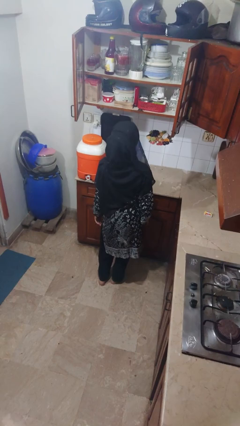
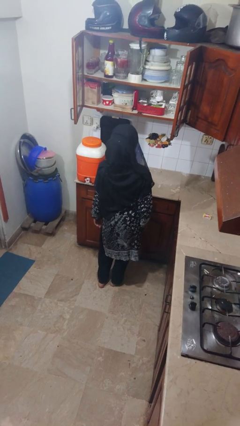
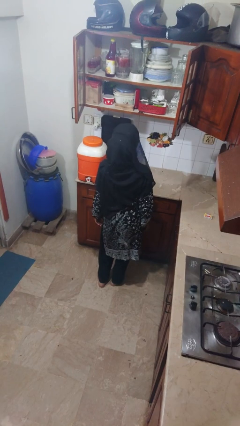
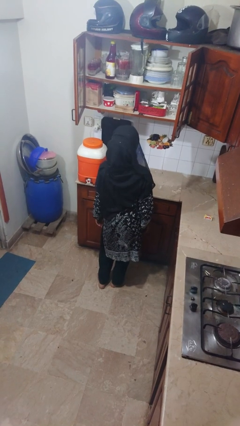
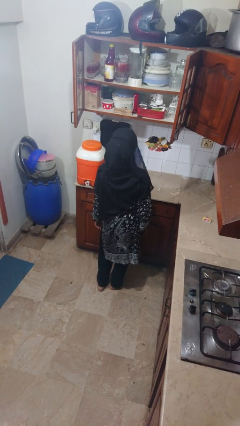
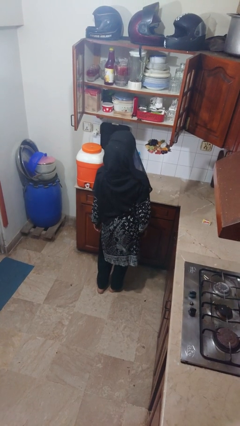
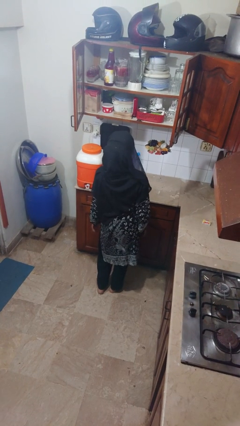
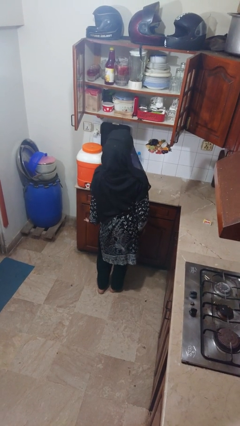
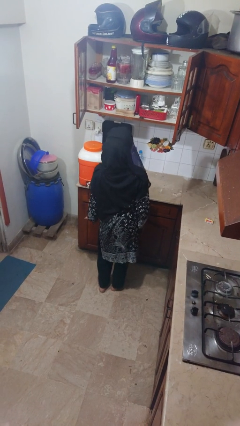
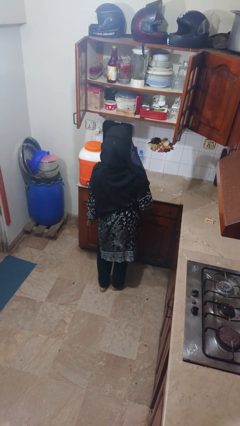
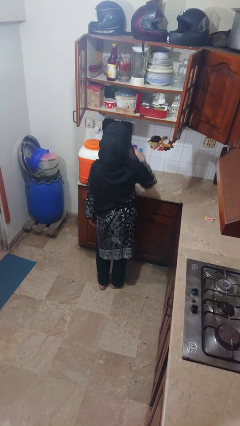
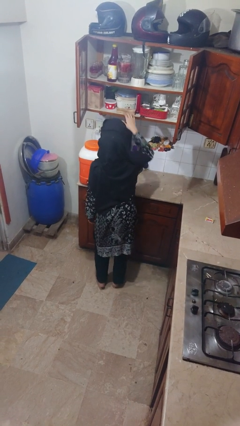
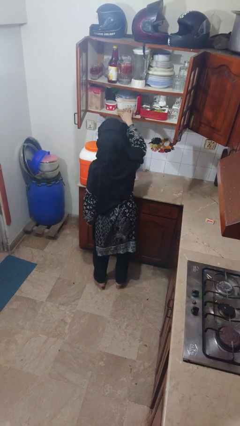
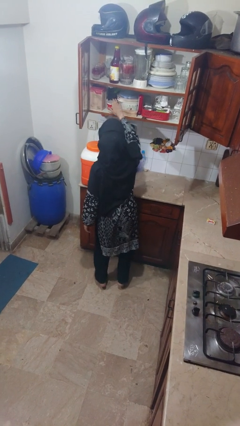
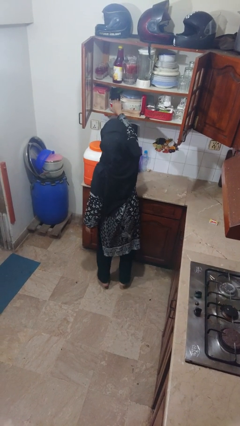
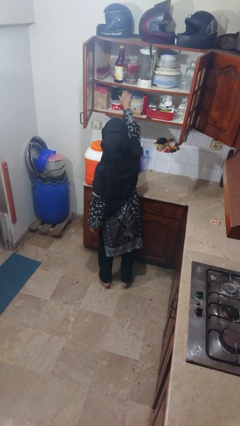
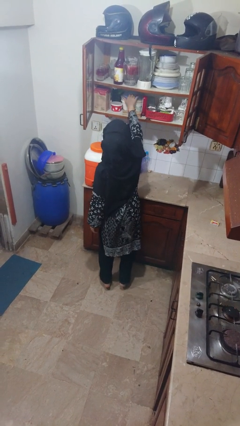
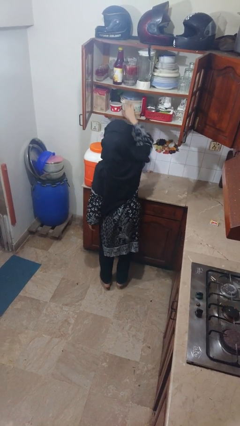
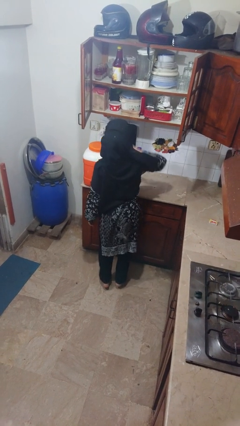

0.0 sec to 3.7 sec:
person searches in cabinet

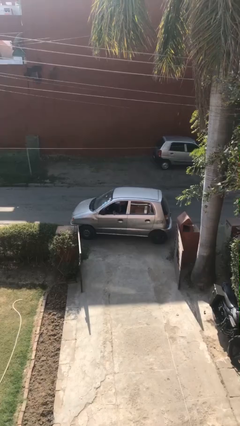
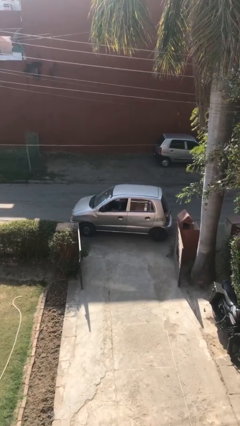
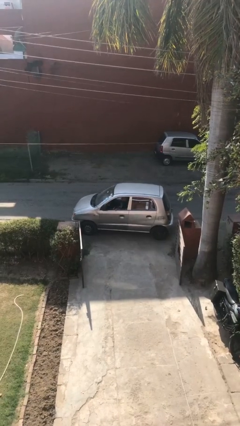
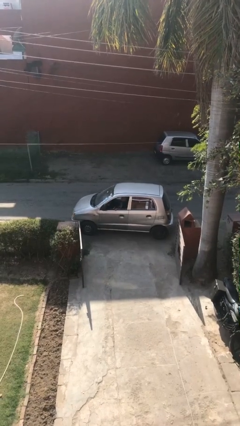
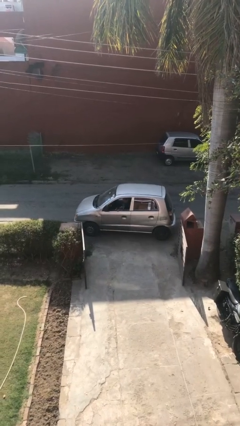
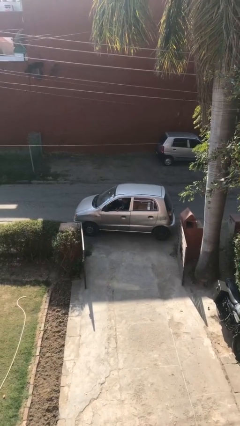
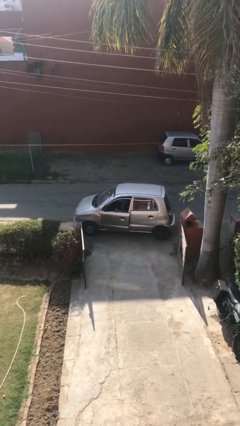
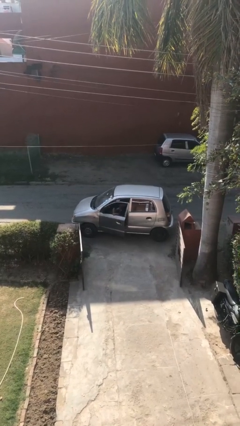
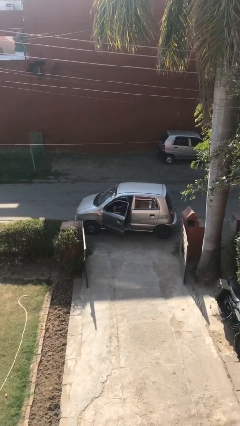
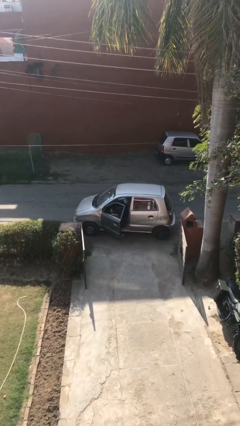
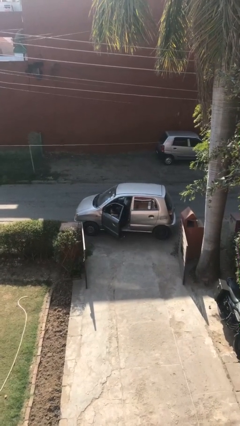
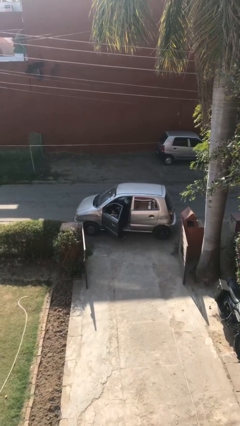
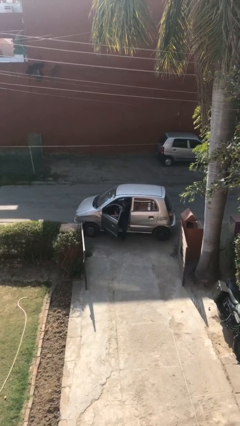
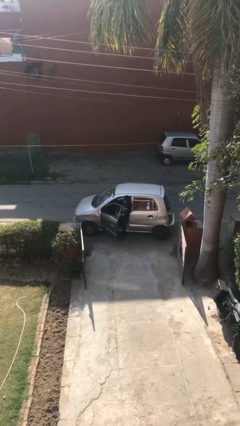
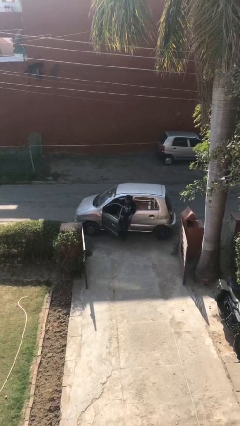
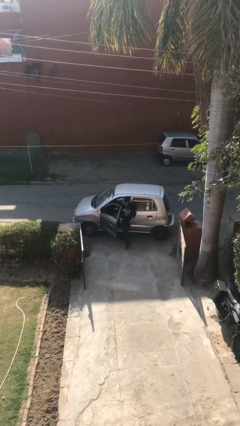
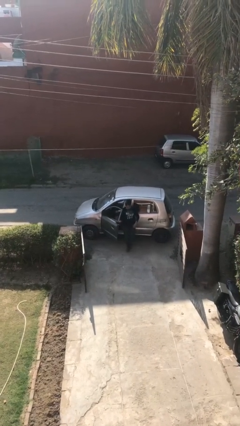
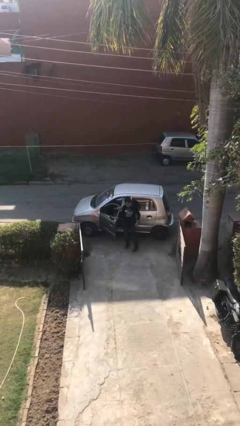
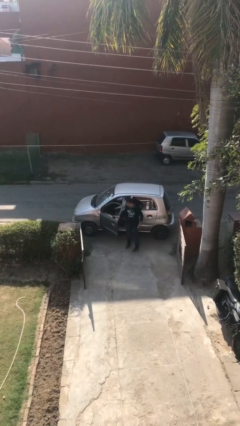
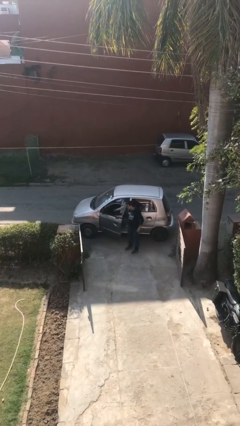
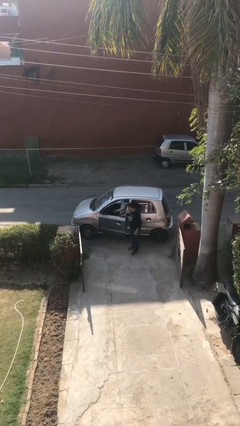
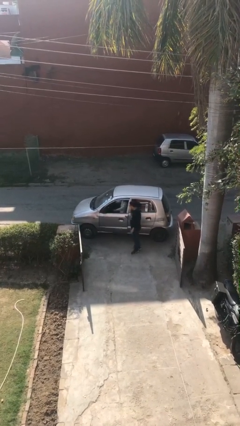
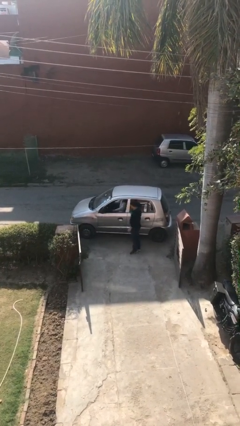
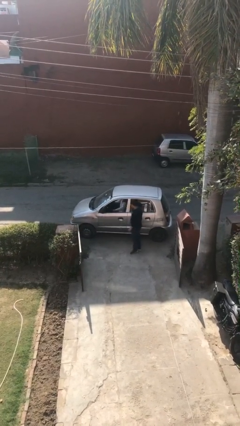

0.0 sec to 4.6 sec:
car drops off person

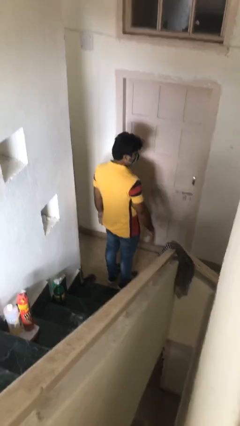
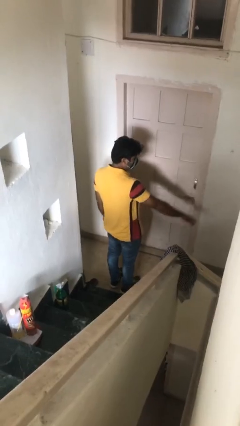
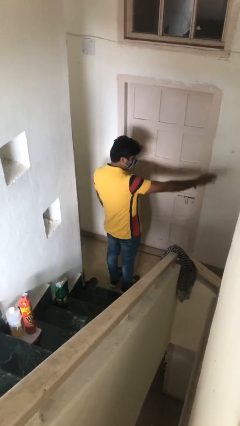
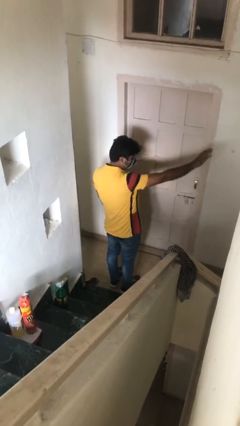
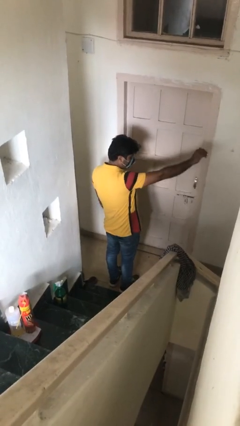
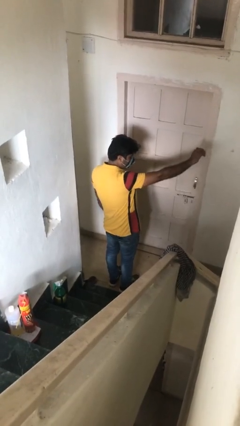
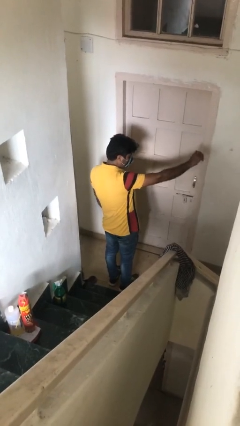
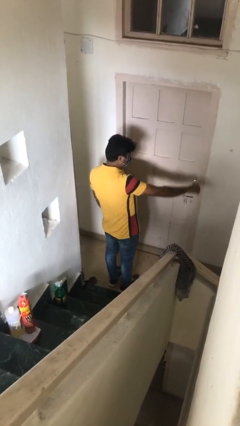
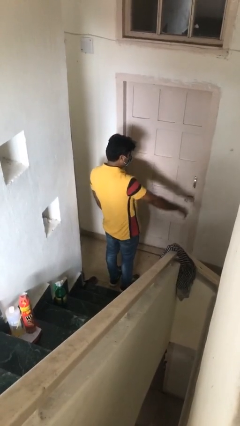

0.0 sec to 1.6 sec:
person gestures come here

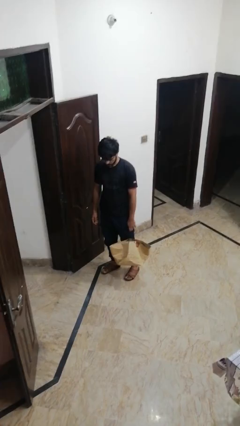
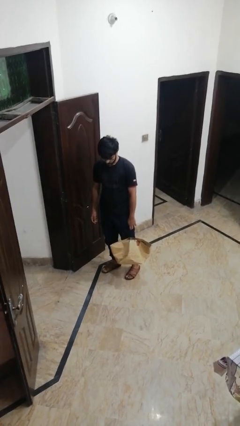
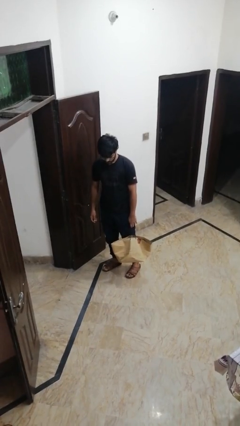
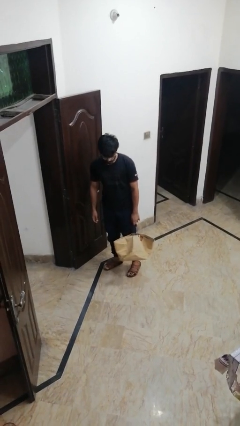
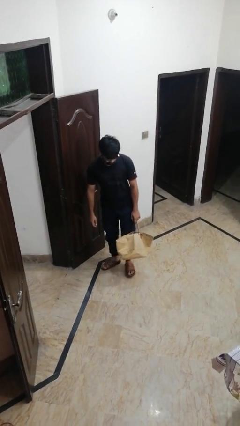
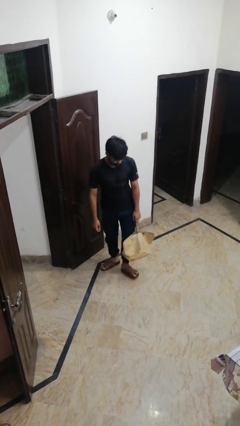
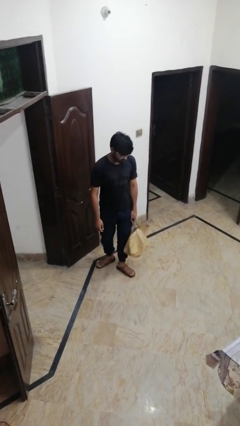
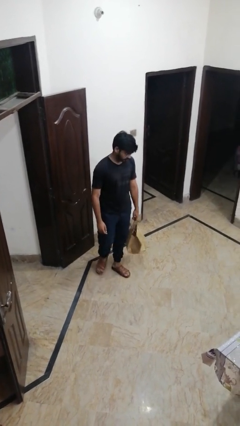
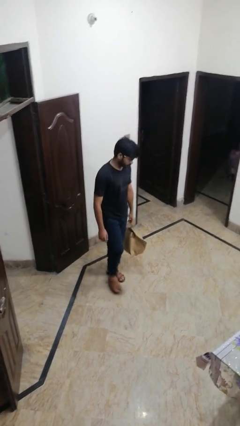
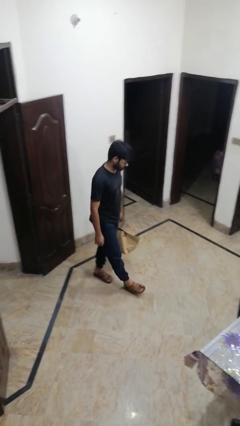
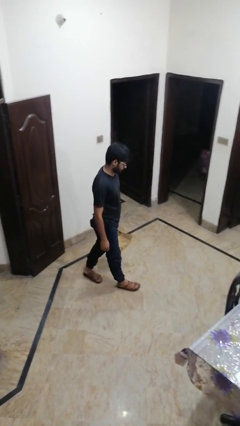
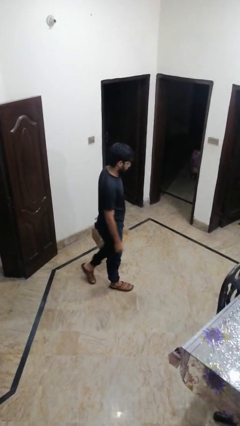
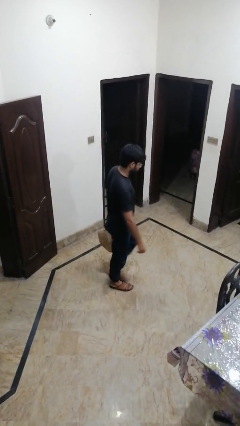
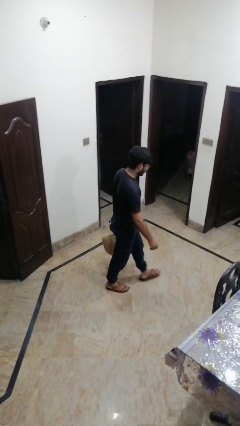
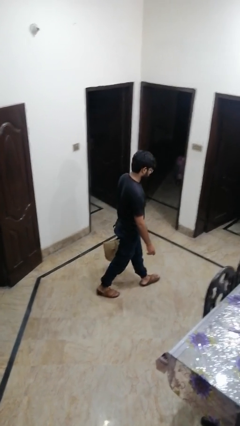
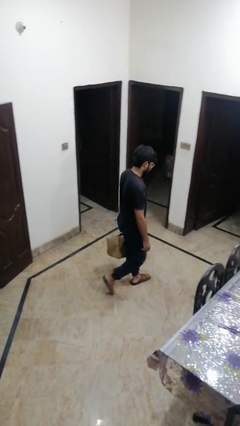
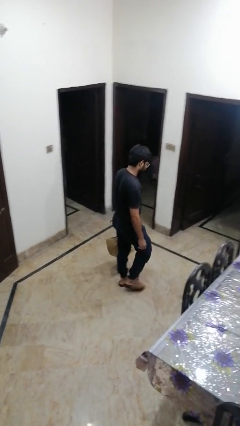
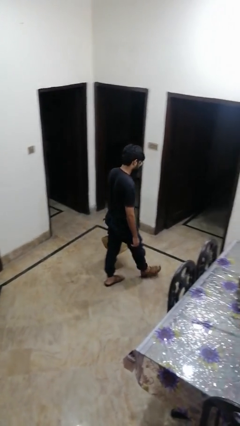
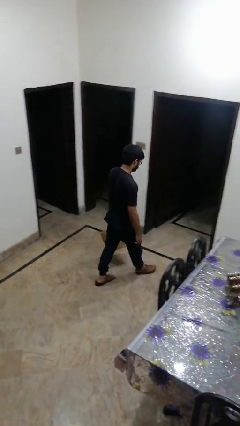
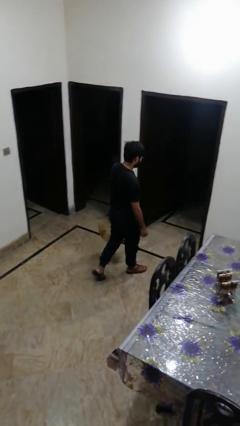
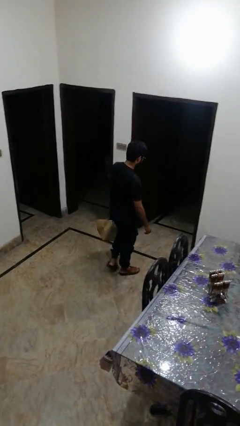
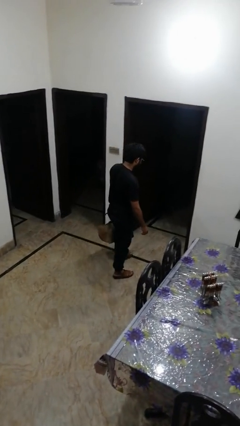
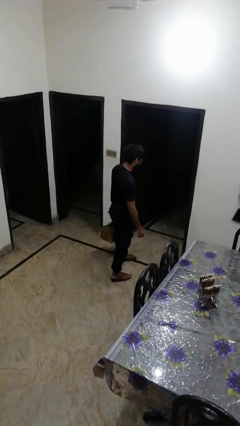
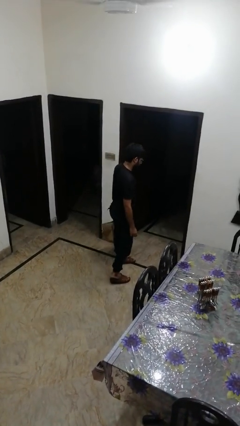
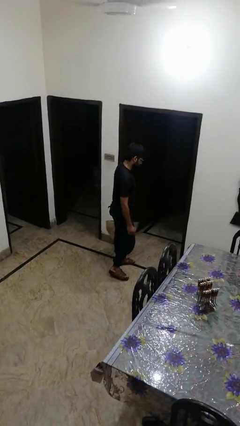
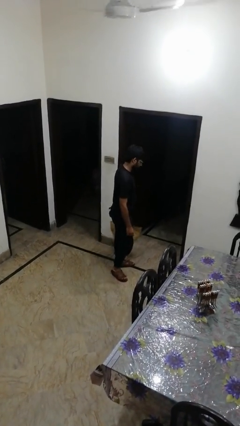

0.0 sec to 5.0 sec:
person carries groceries

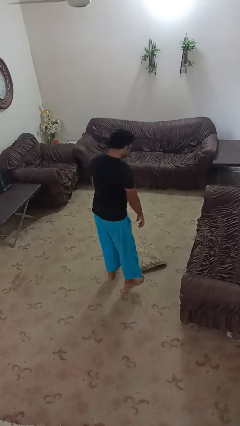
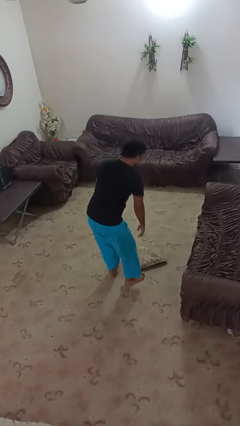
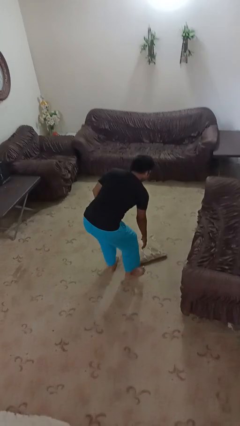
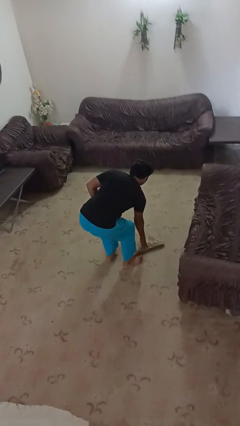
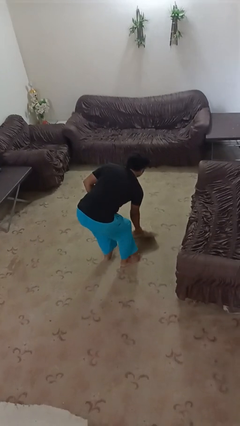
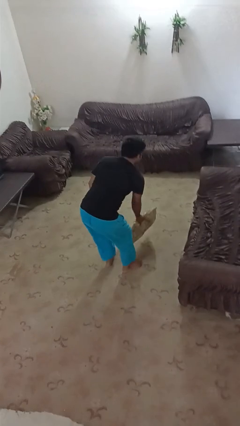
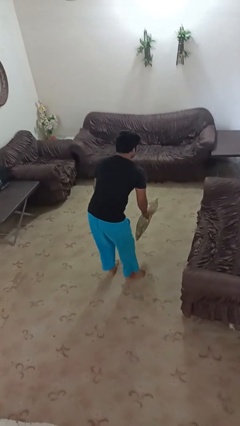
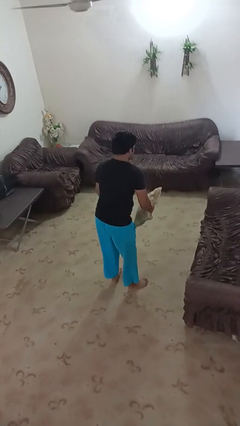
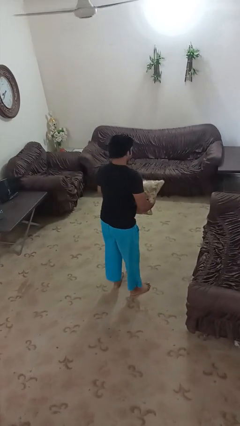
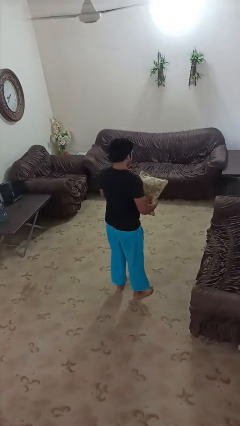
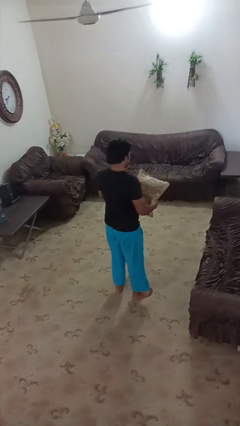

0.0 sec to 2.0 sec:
person picks up object from floor

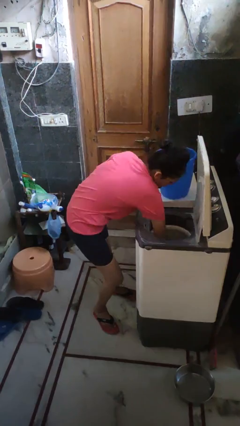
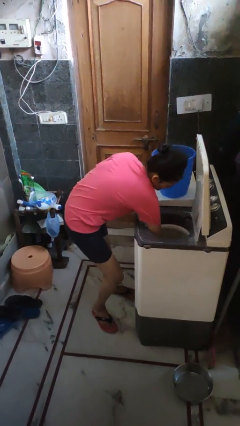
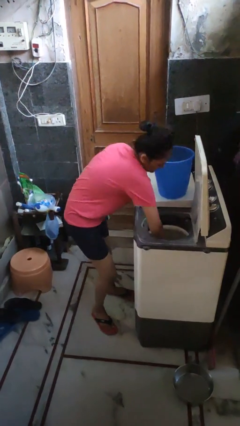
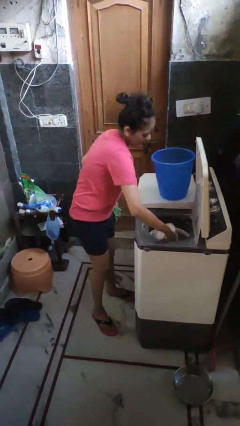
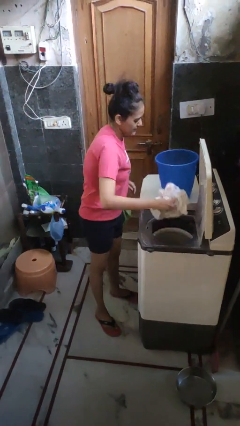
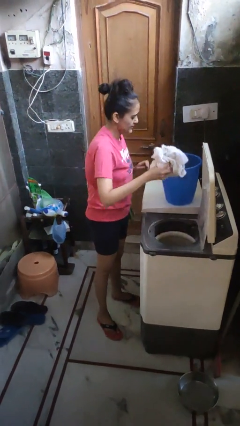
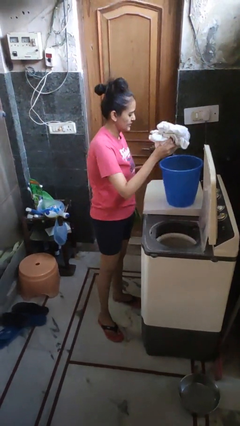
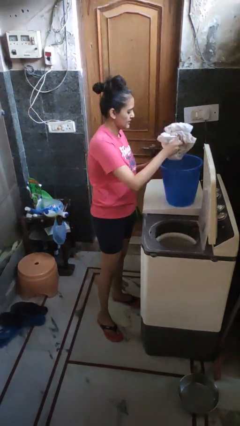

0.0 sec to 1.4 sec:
person takes clothes from dresser
